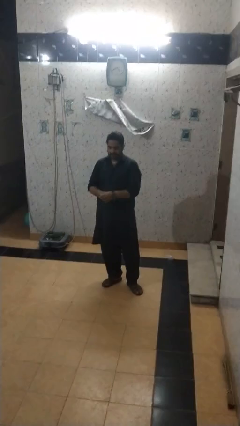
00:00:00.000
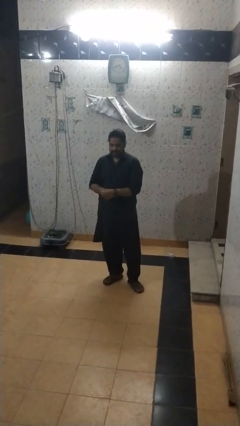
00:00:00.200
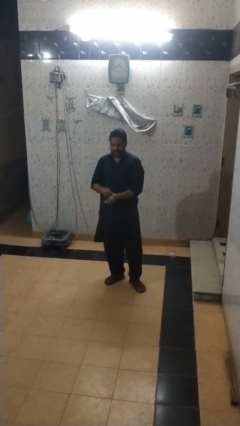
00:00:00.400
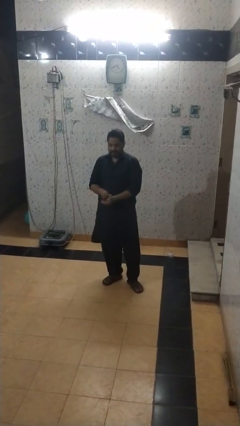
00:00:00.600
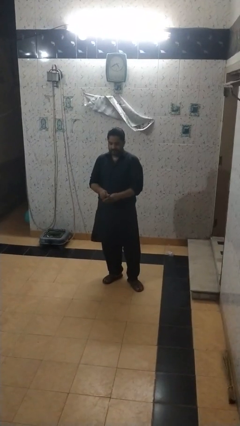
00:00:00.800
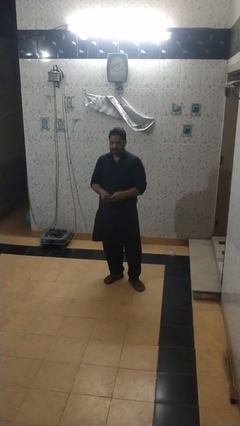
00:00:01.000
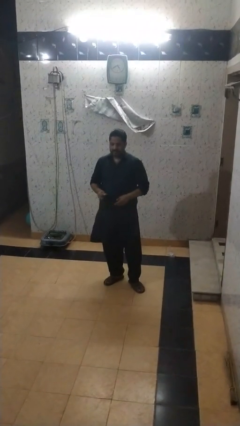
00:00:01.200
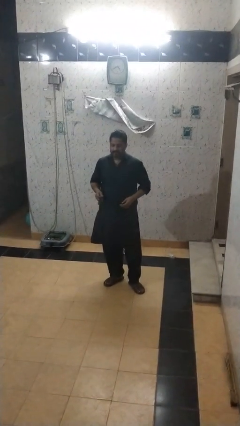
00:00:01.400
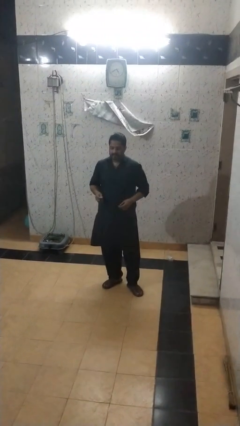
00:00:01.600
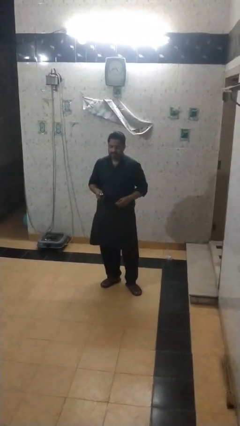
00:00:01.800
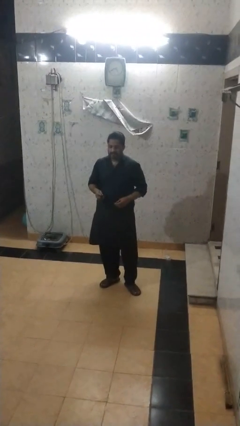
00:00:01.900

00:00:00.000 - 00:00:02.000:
person takes off wristwatch

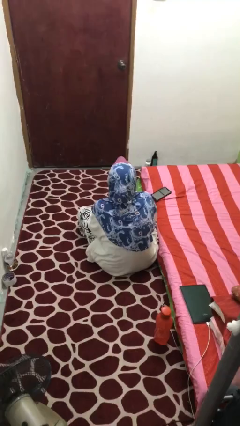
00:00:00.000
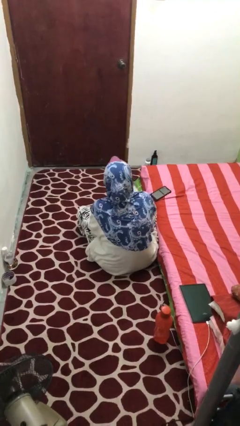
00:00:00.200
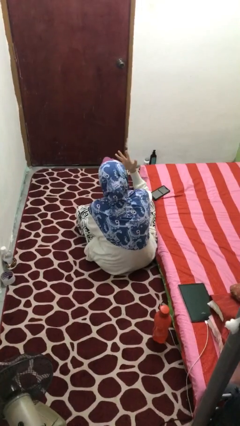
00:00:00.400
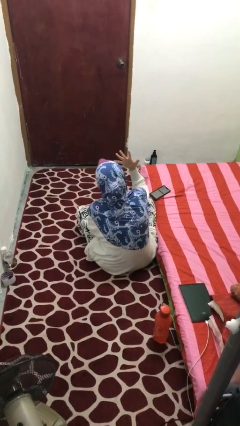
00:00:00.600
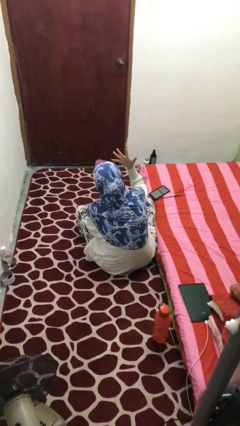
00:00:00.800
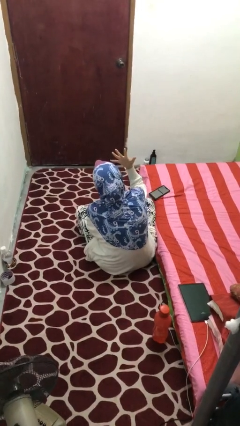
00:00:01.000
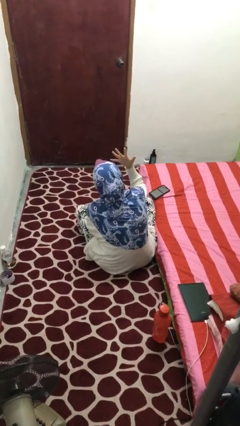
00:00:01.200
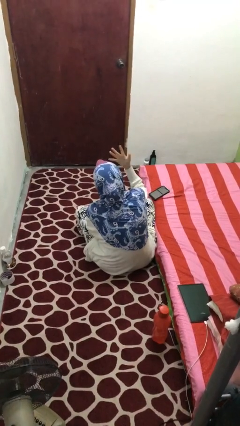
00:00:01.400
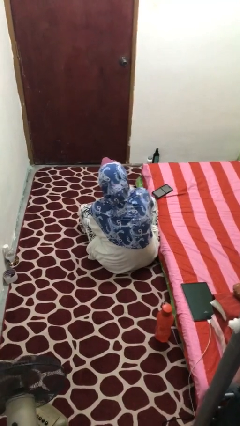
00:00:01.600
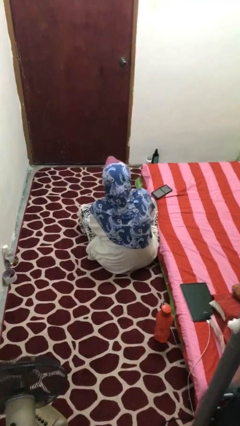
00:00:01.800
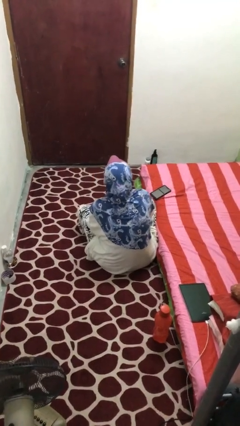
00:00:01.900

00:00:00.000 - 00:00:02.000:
person gestures number five

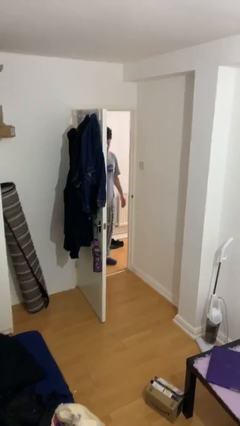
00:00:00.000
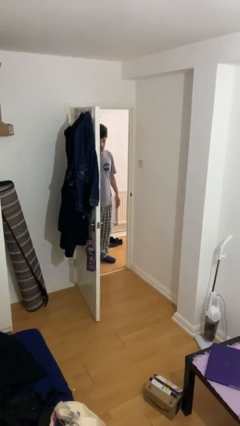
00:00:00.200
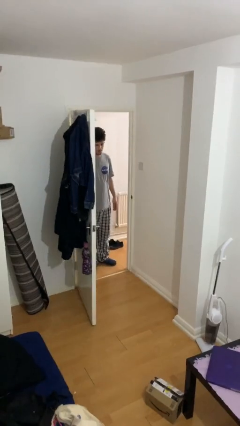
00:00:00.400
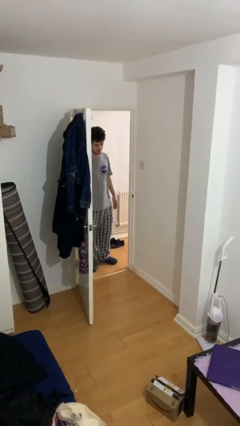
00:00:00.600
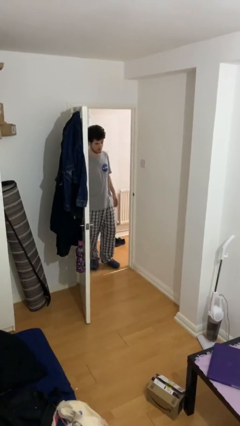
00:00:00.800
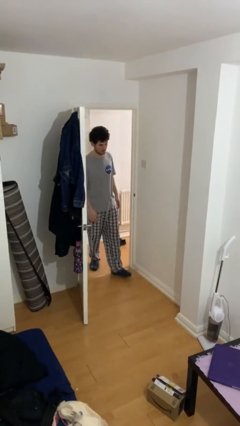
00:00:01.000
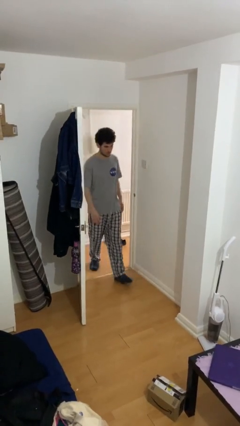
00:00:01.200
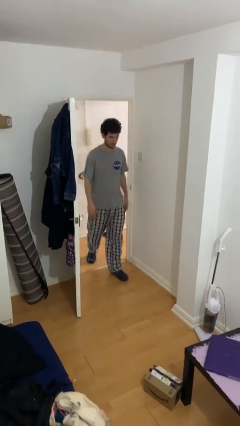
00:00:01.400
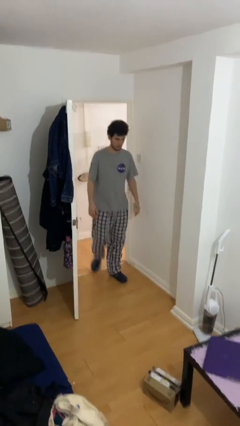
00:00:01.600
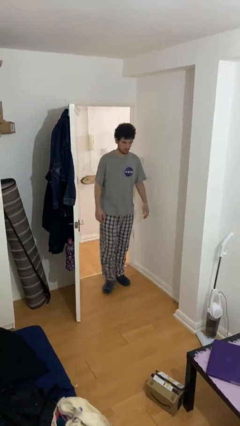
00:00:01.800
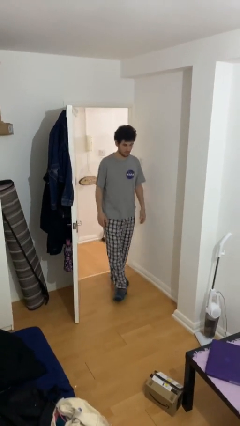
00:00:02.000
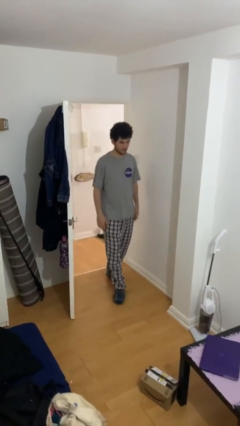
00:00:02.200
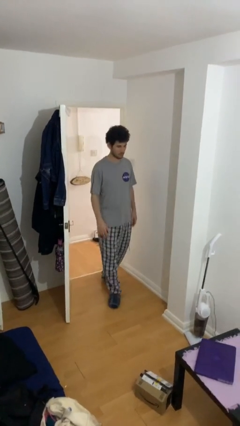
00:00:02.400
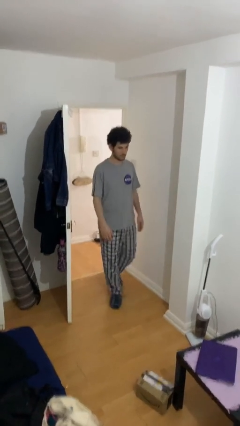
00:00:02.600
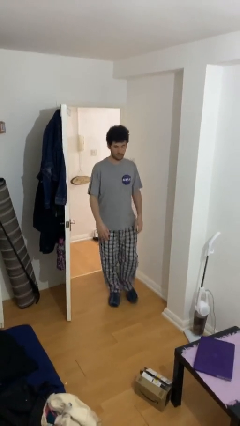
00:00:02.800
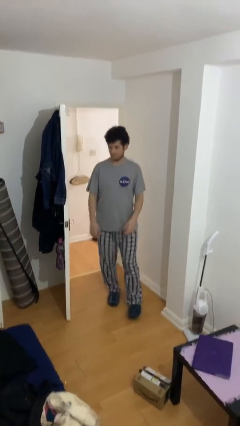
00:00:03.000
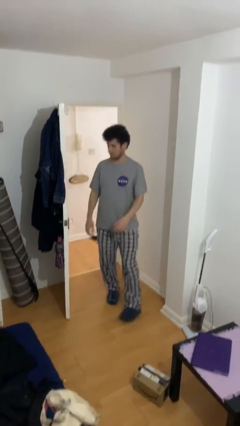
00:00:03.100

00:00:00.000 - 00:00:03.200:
person enters scene through structure

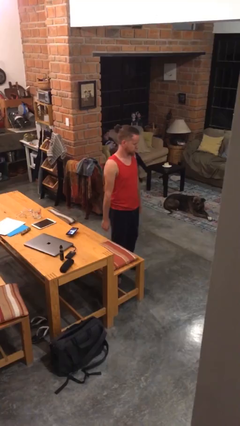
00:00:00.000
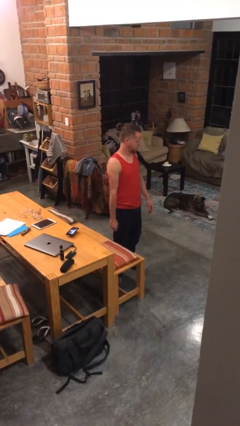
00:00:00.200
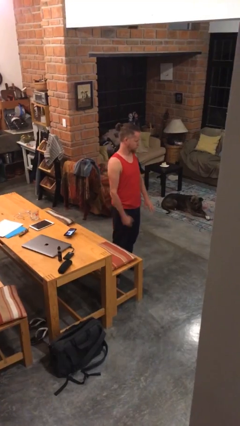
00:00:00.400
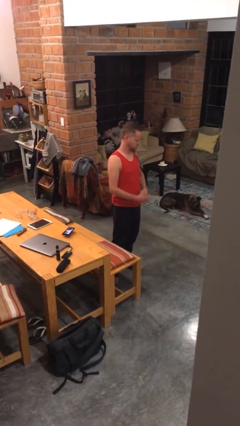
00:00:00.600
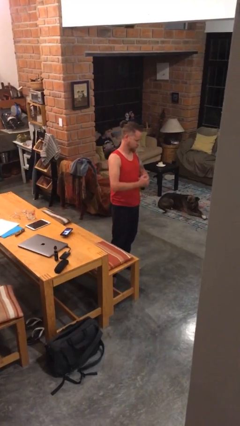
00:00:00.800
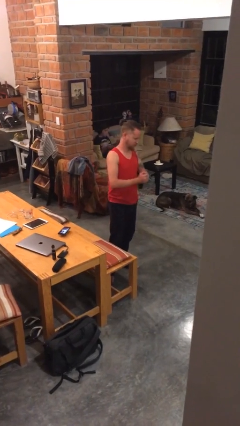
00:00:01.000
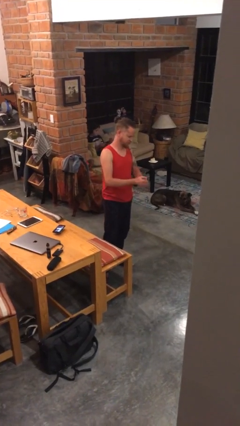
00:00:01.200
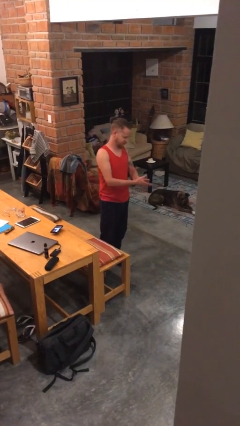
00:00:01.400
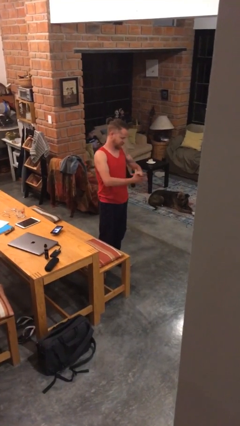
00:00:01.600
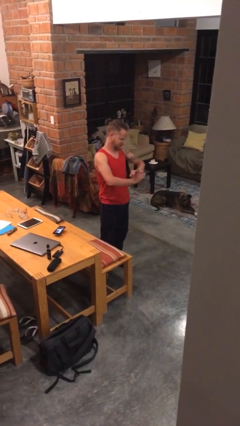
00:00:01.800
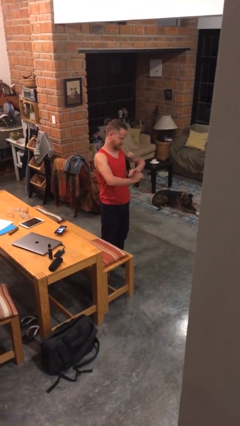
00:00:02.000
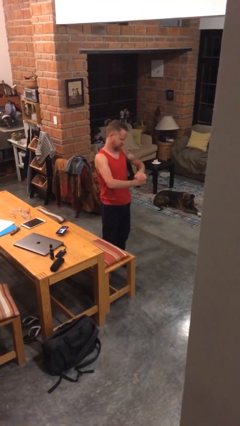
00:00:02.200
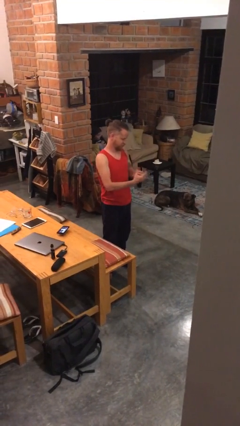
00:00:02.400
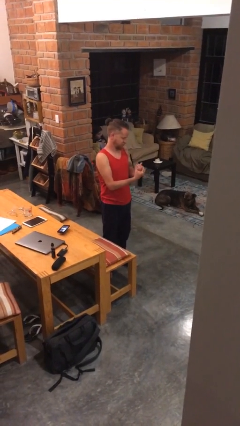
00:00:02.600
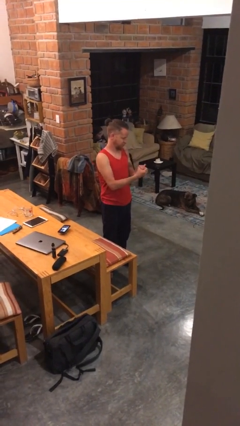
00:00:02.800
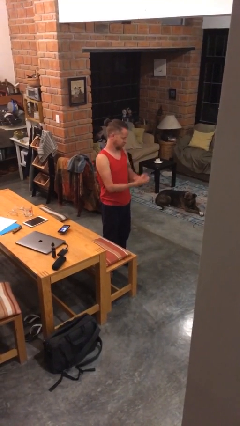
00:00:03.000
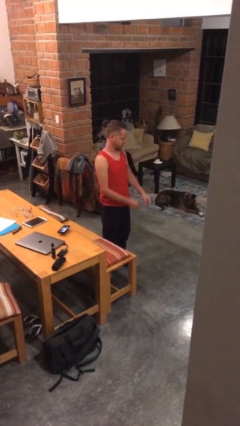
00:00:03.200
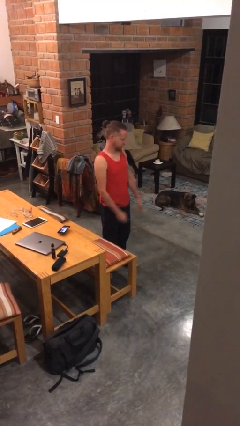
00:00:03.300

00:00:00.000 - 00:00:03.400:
person cracks knuckles

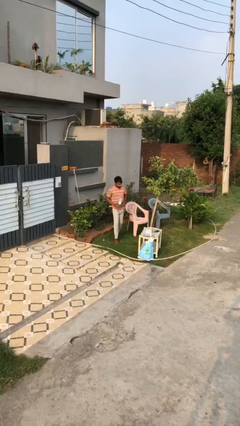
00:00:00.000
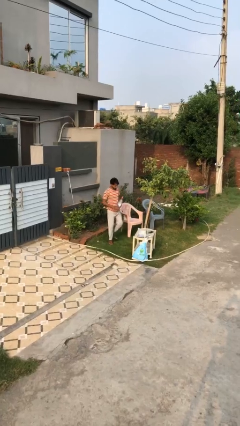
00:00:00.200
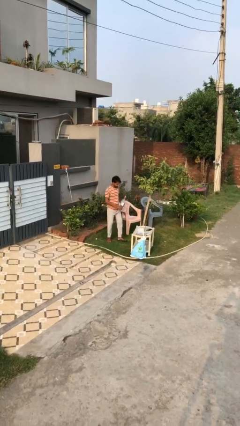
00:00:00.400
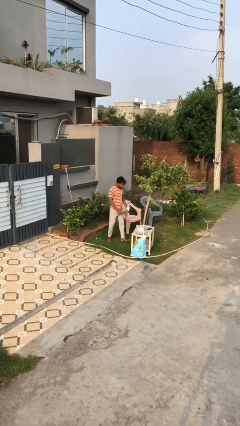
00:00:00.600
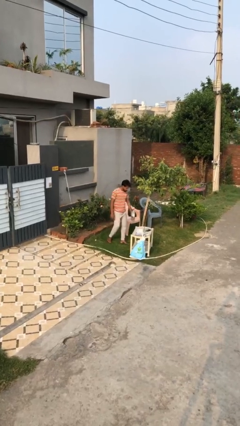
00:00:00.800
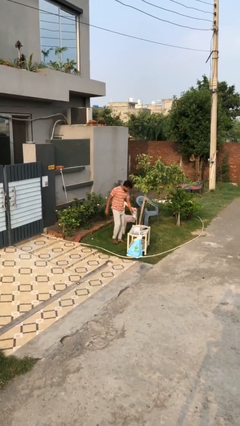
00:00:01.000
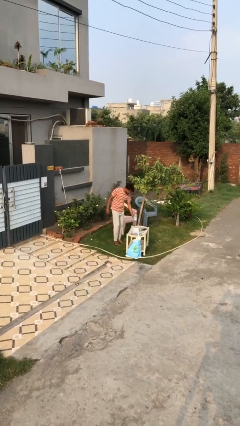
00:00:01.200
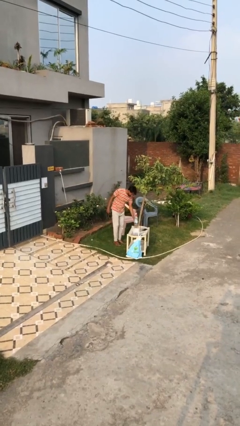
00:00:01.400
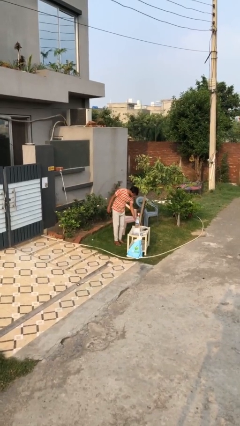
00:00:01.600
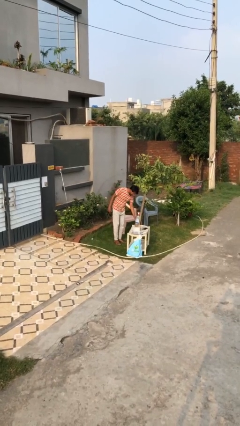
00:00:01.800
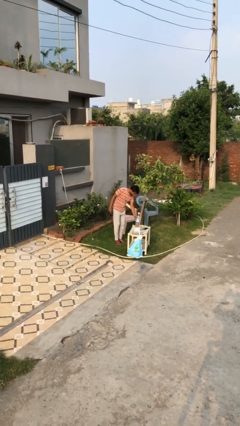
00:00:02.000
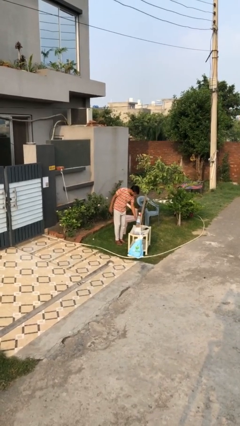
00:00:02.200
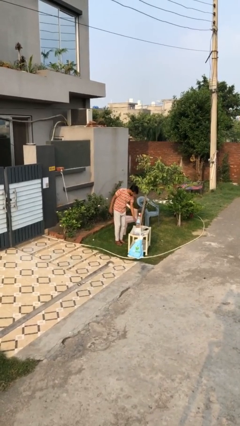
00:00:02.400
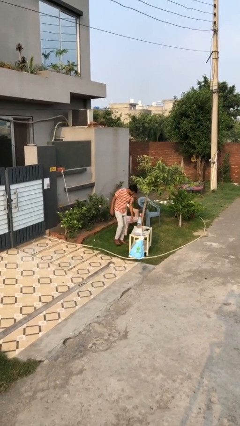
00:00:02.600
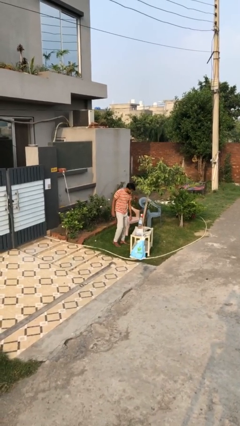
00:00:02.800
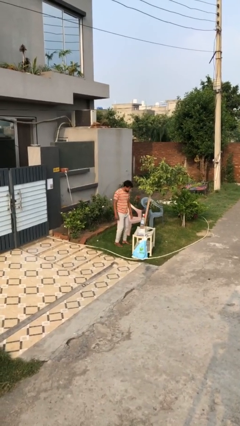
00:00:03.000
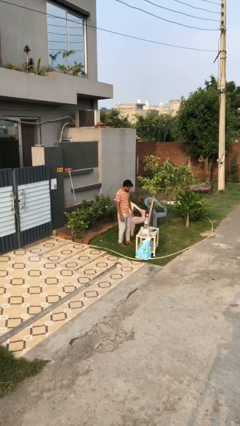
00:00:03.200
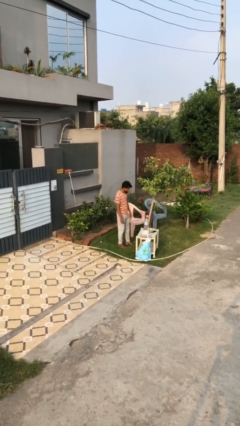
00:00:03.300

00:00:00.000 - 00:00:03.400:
person puts down object on table

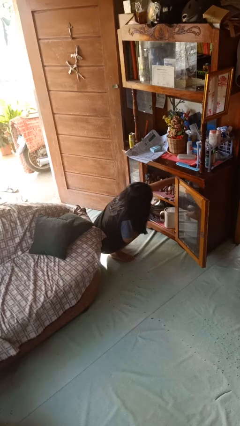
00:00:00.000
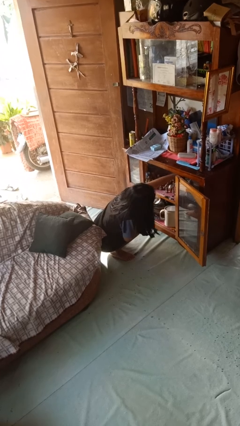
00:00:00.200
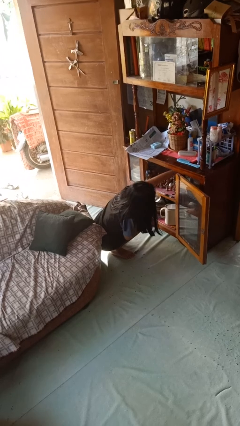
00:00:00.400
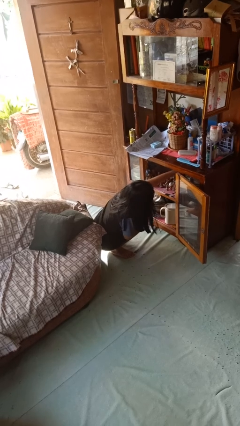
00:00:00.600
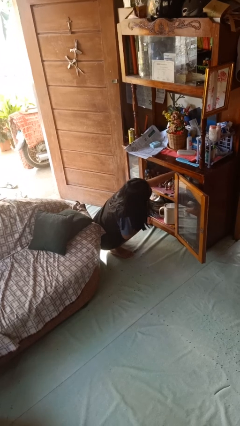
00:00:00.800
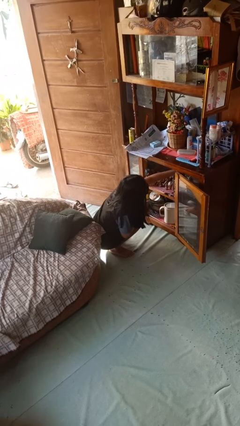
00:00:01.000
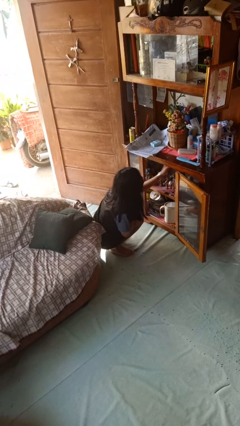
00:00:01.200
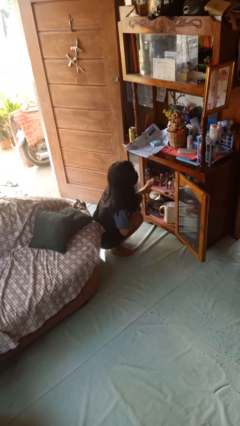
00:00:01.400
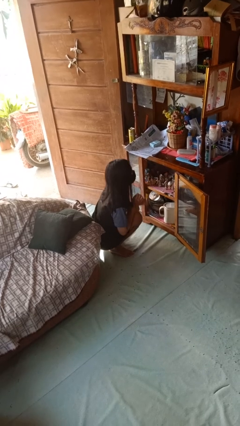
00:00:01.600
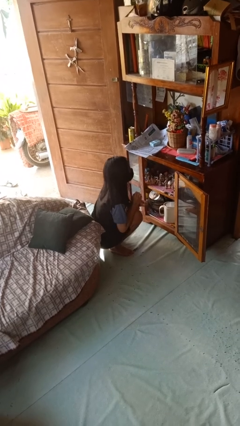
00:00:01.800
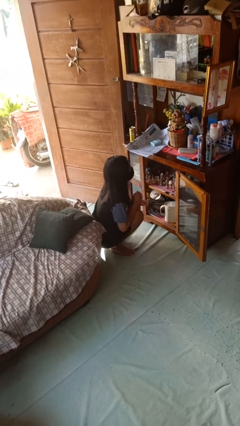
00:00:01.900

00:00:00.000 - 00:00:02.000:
person searches in cabinet

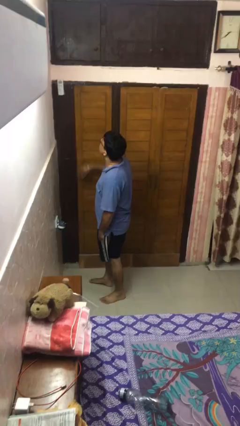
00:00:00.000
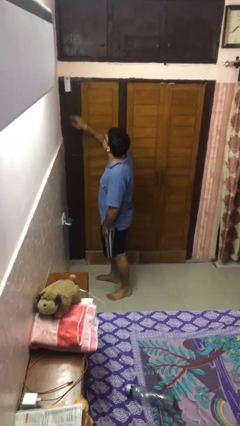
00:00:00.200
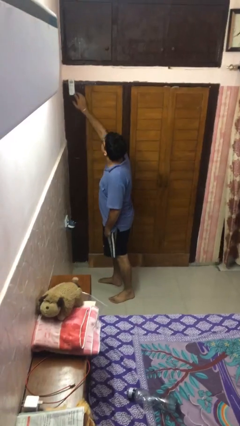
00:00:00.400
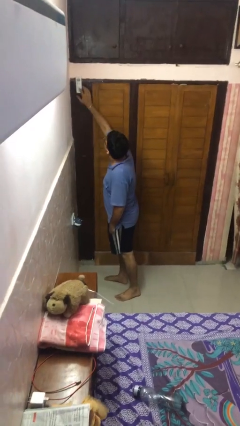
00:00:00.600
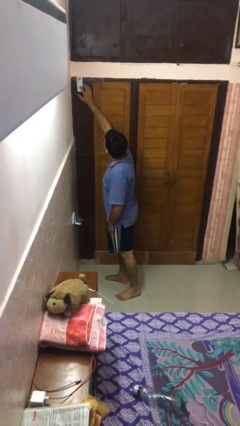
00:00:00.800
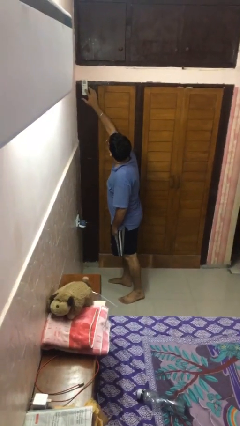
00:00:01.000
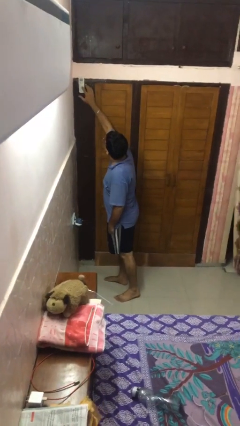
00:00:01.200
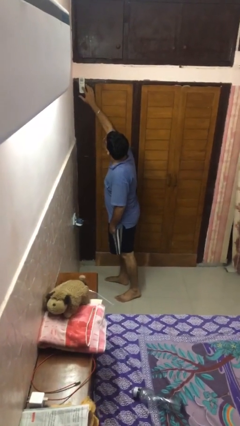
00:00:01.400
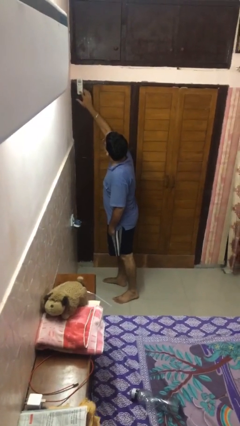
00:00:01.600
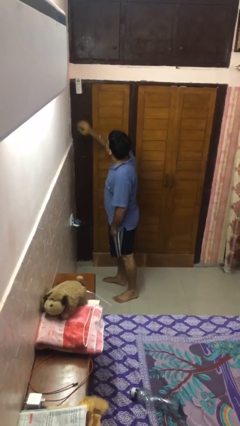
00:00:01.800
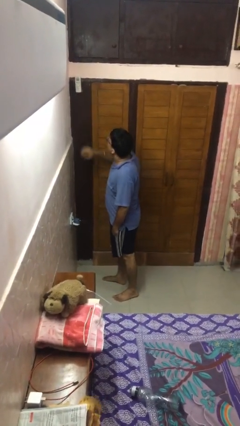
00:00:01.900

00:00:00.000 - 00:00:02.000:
person adjusts thermostat
